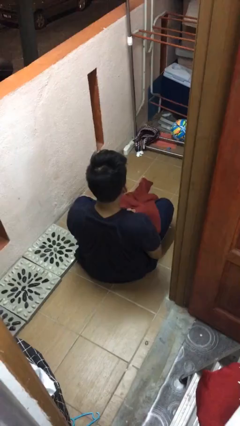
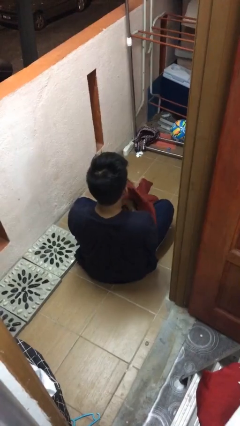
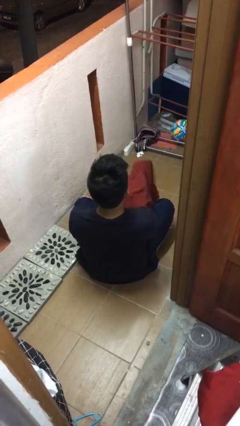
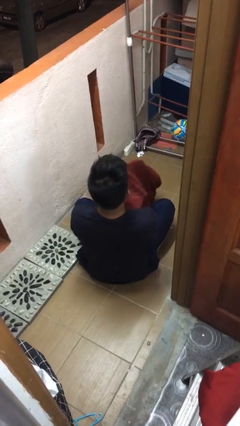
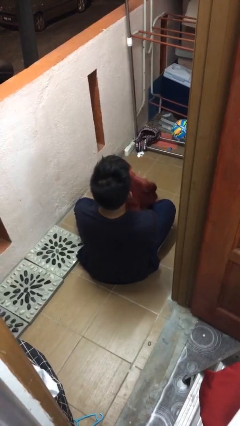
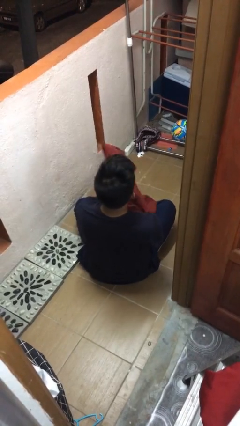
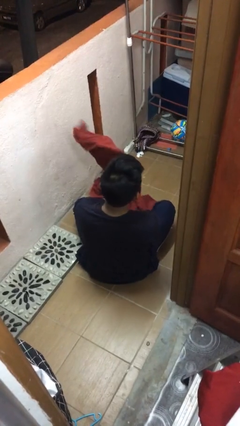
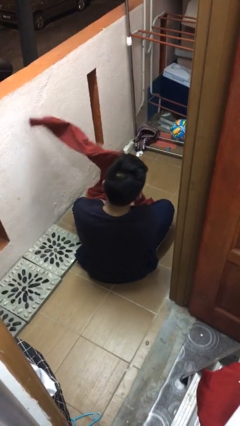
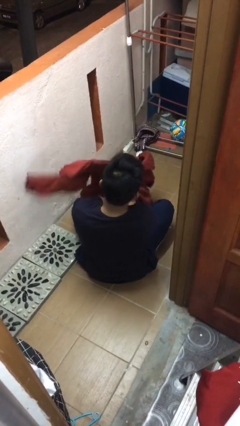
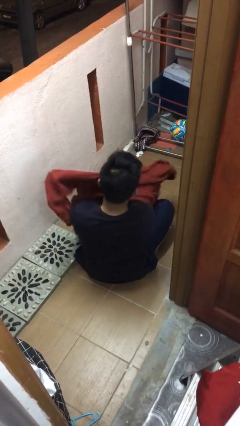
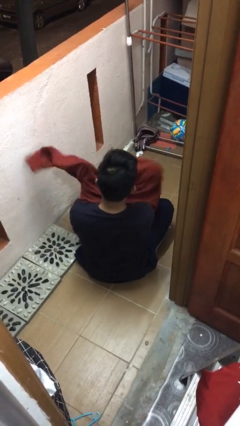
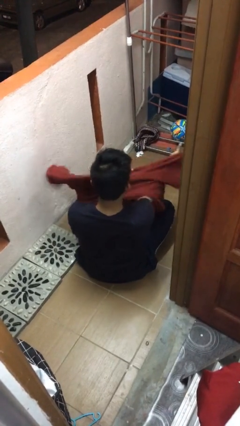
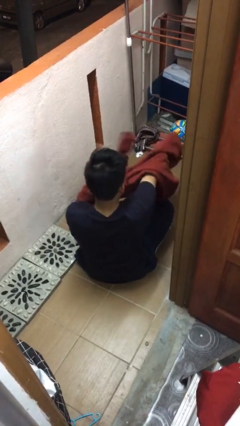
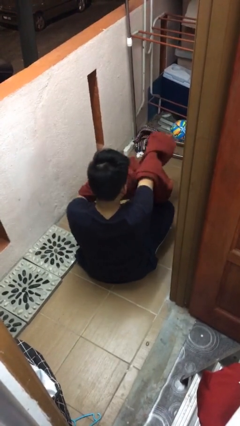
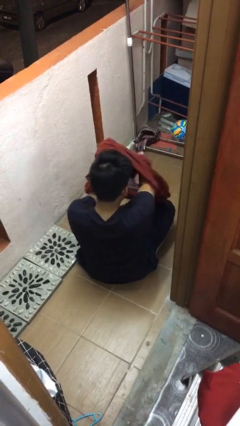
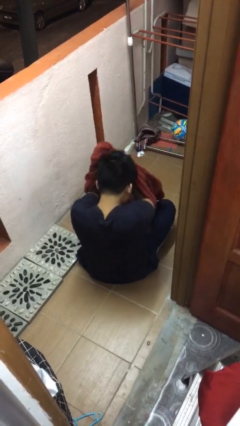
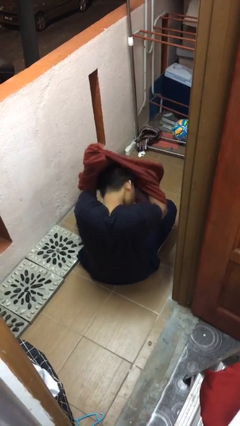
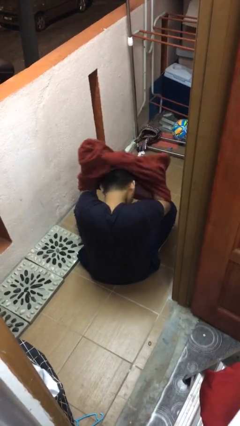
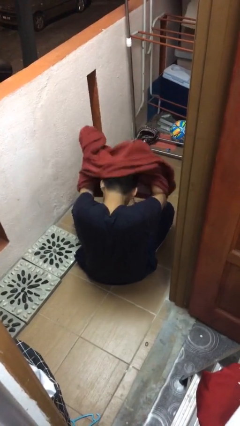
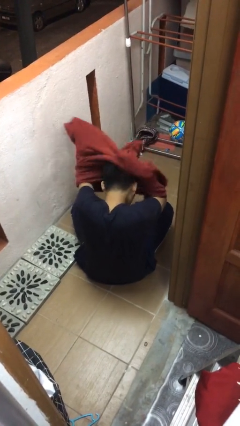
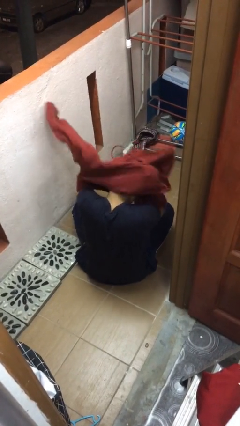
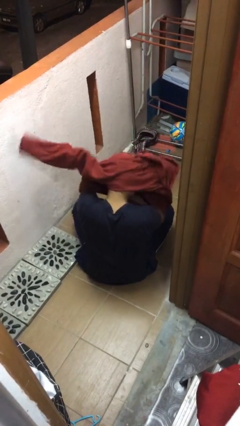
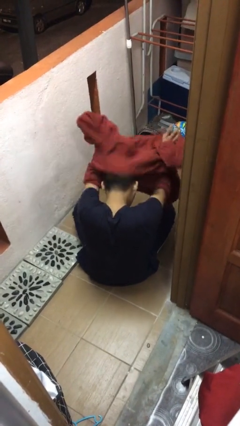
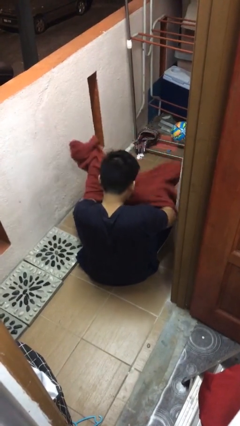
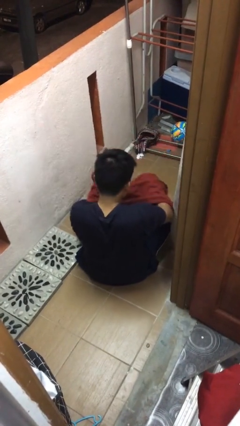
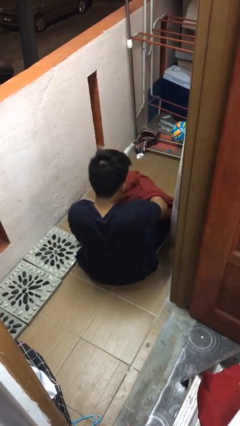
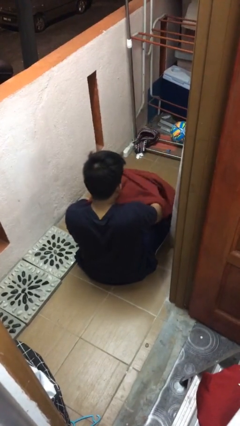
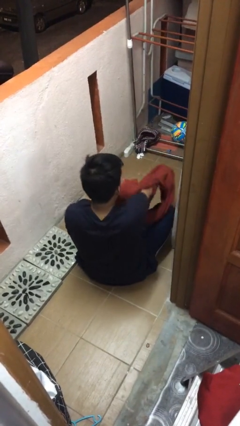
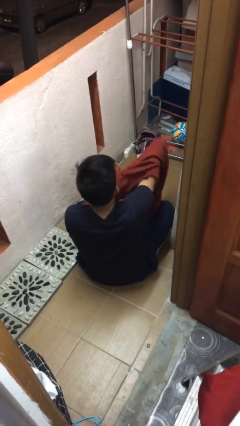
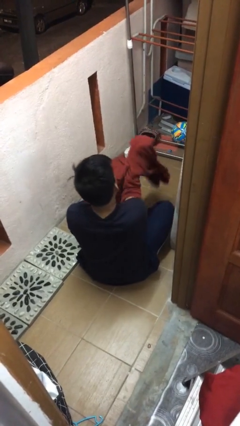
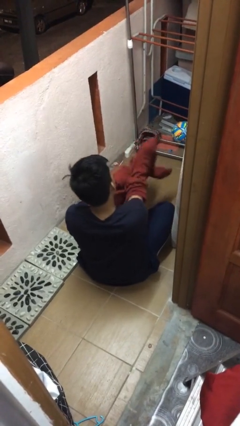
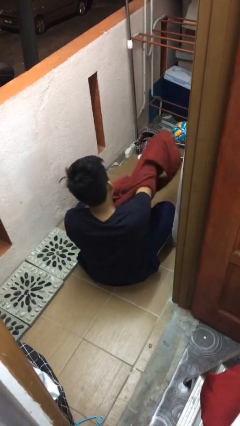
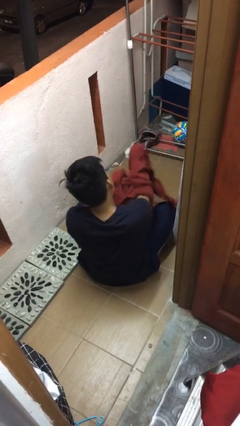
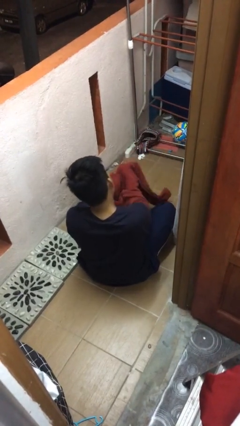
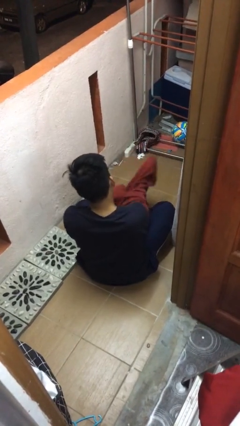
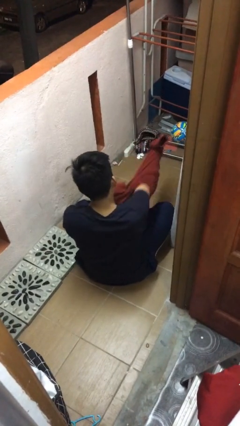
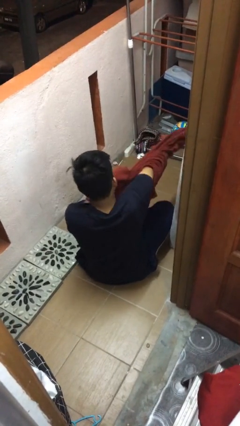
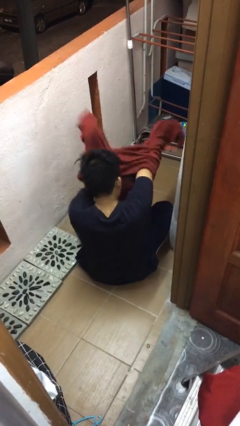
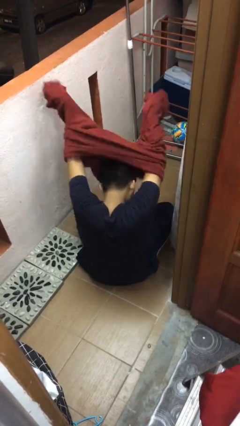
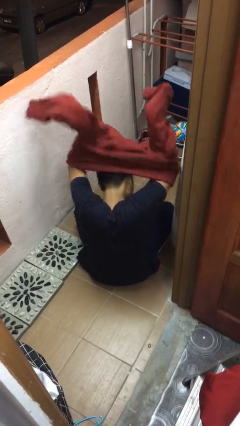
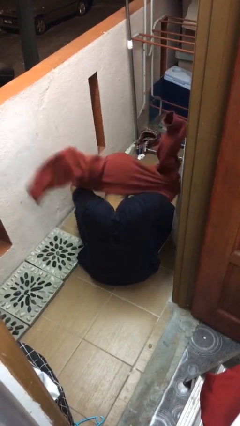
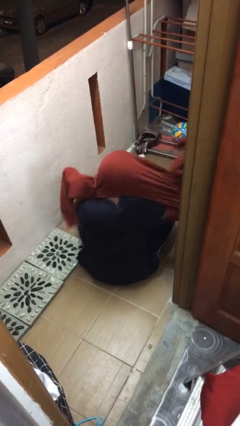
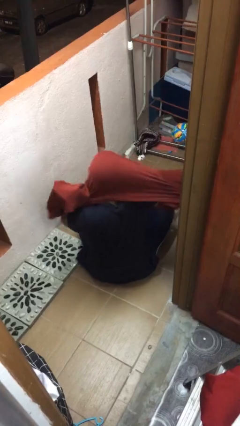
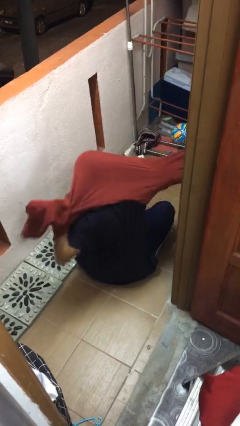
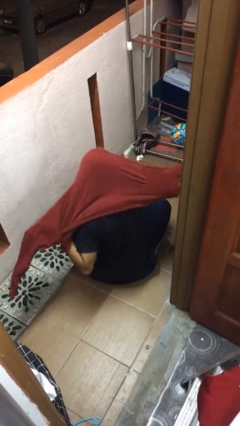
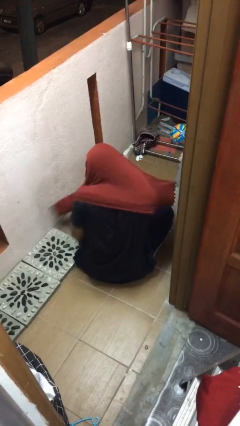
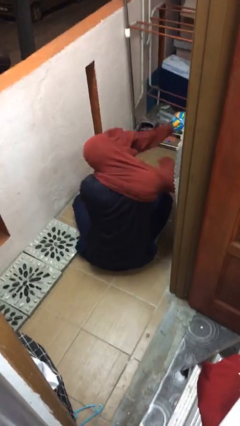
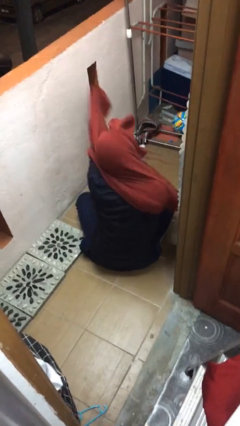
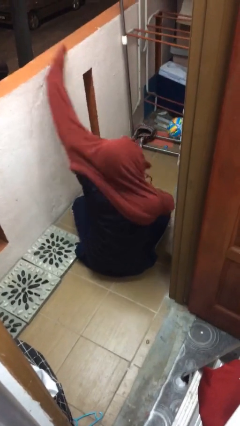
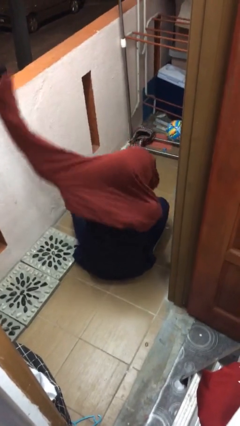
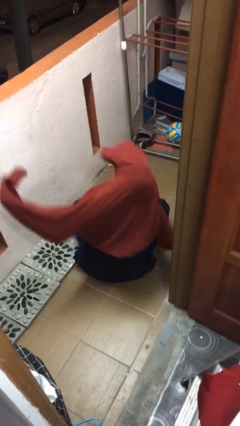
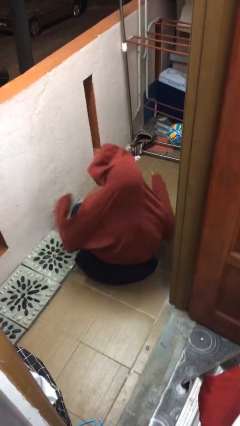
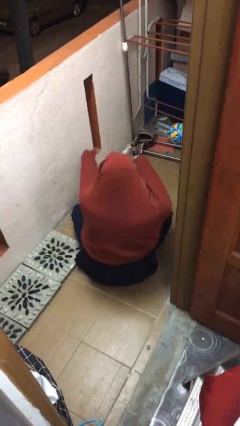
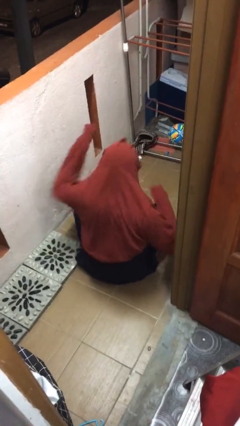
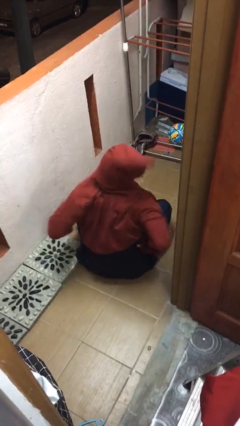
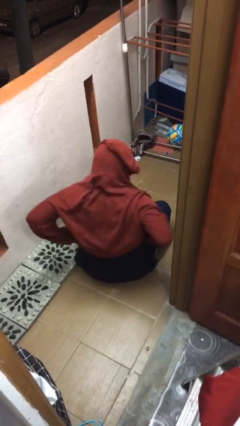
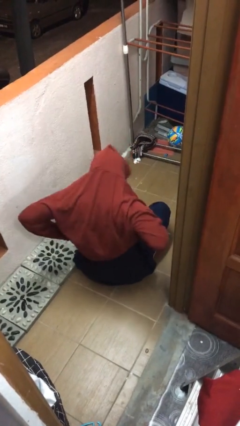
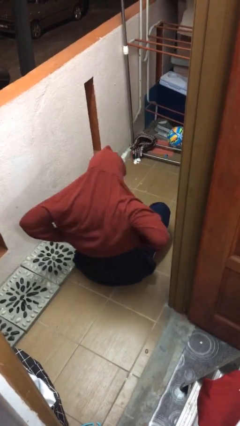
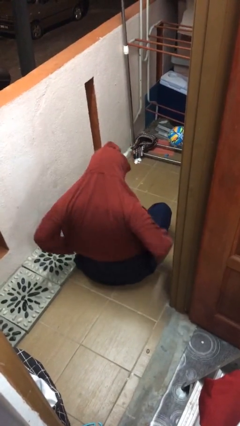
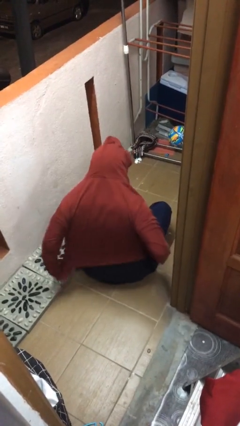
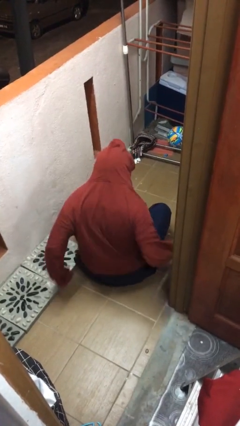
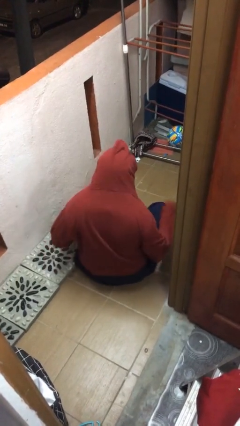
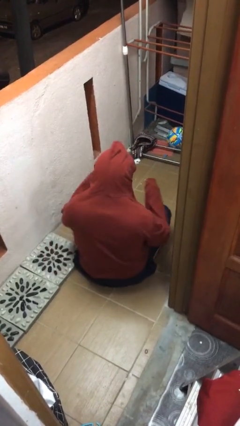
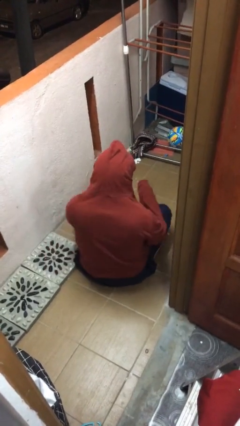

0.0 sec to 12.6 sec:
person puts on hoodie

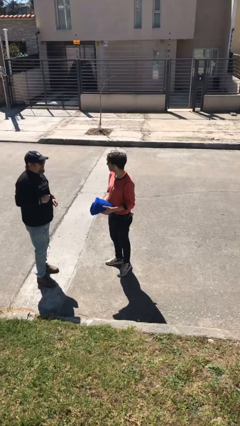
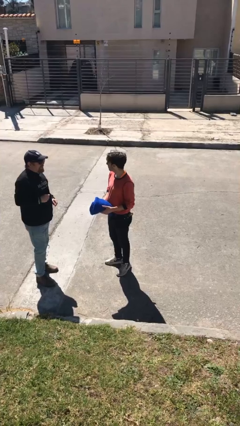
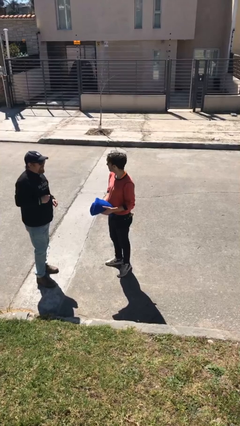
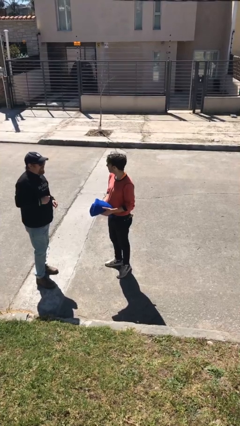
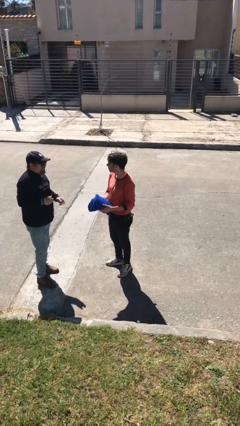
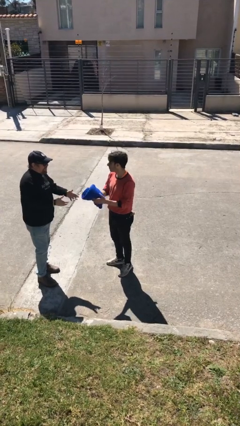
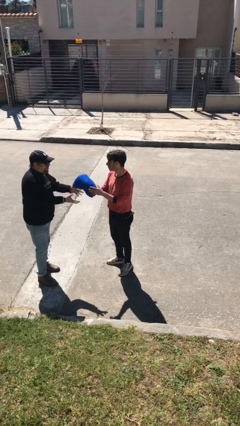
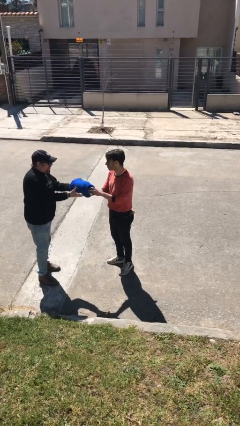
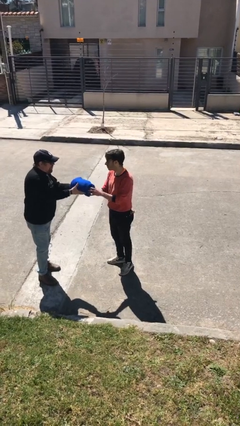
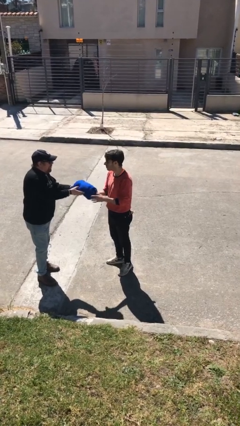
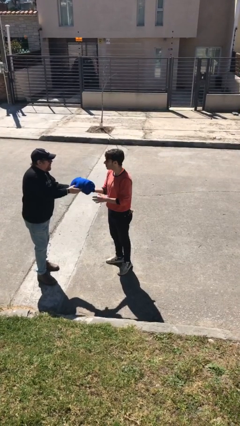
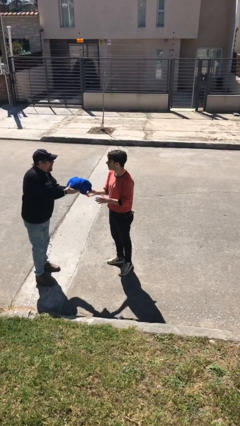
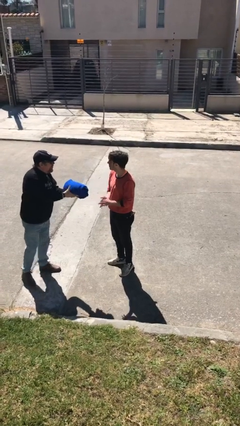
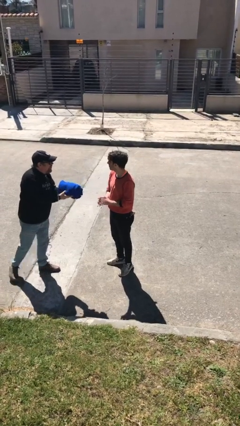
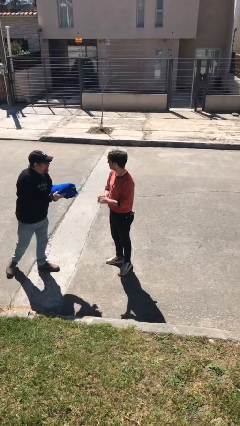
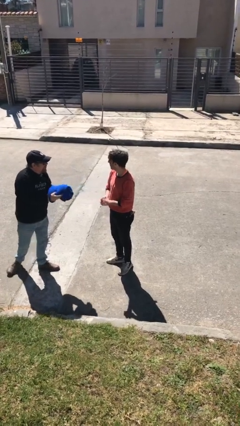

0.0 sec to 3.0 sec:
person transfers object to person

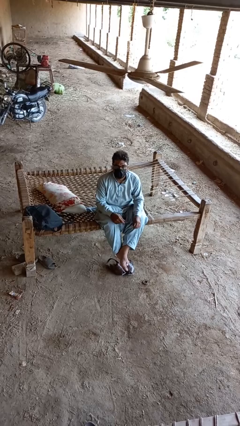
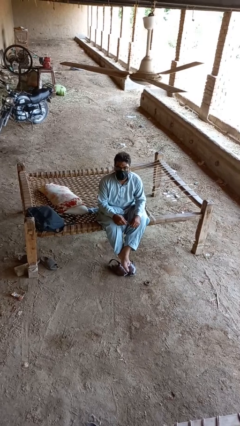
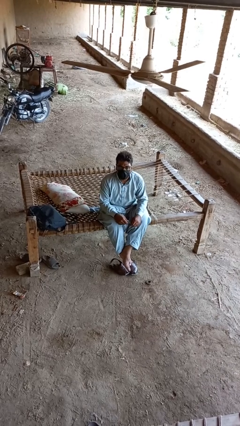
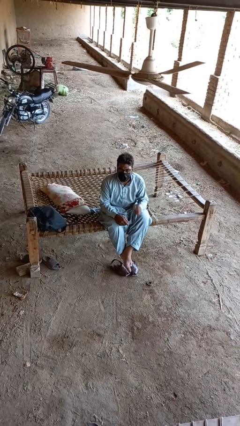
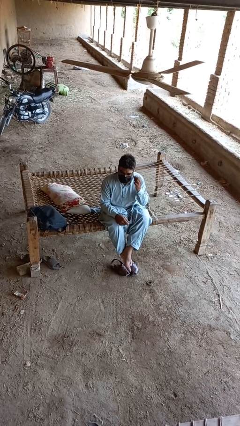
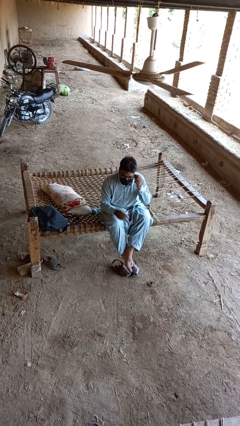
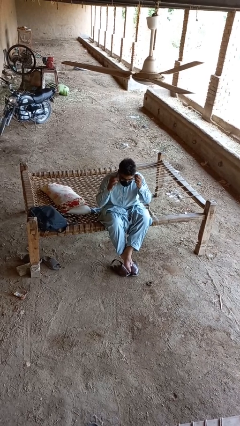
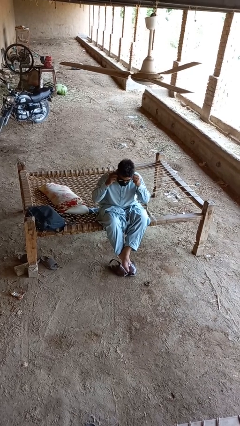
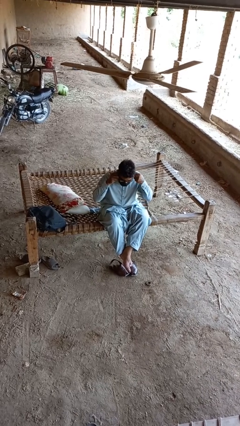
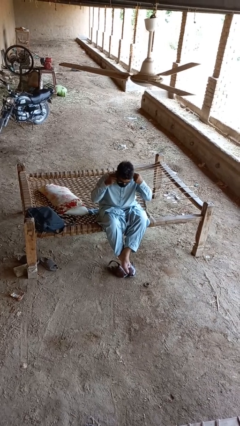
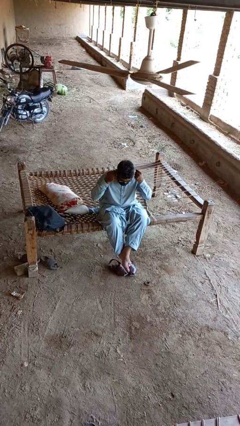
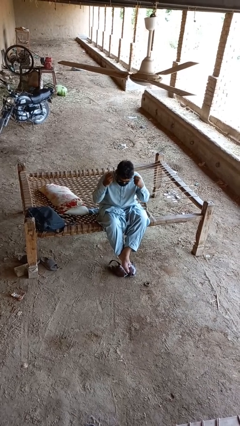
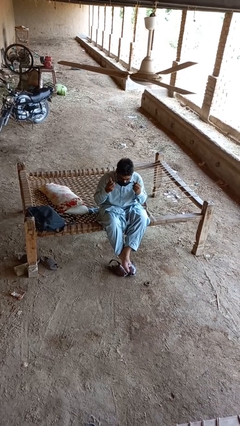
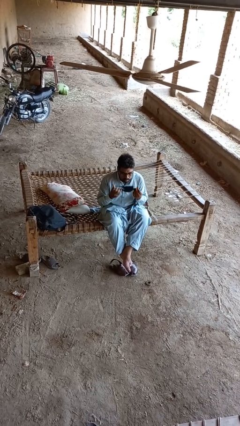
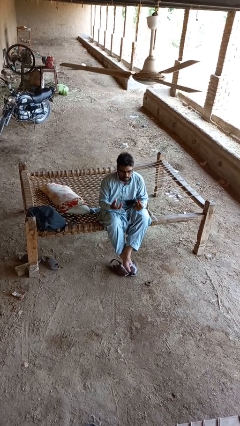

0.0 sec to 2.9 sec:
person takes off facemask
